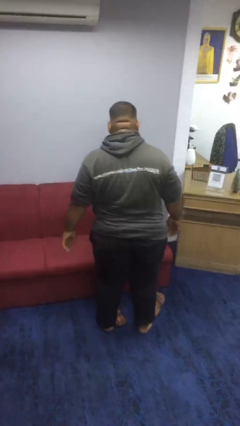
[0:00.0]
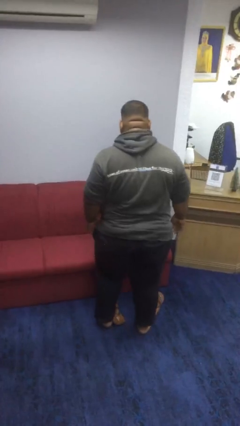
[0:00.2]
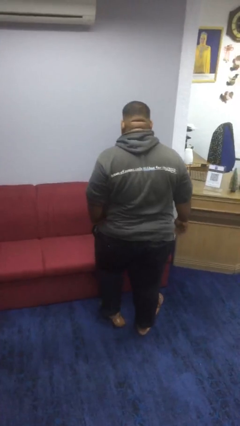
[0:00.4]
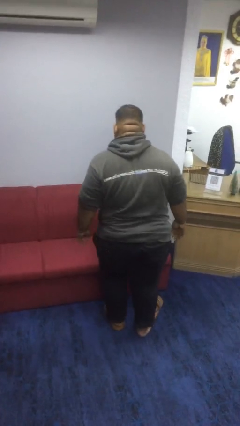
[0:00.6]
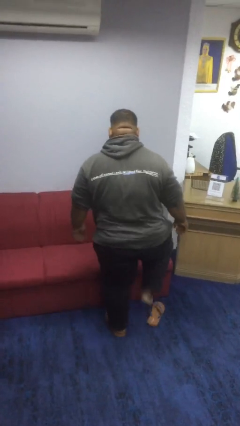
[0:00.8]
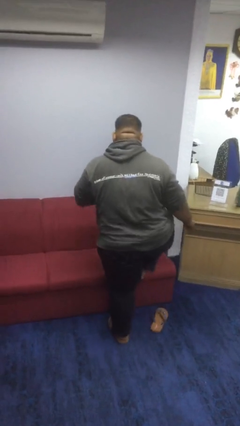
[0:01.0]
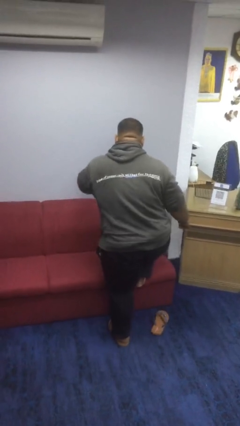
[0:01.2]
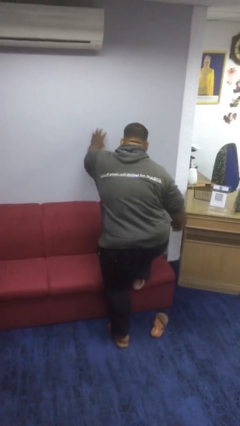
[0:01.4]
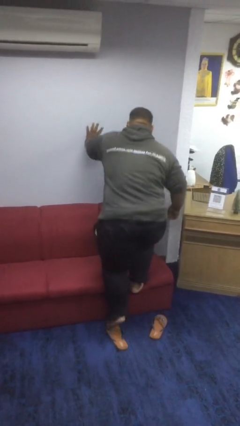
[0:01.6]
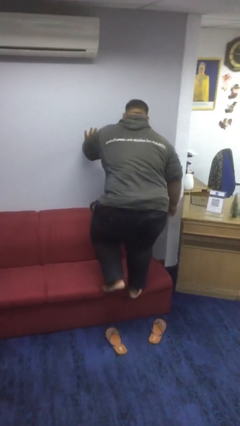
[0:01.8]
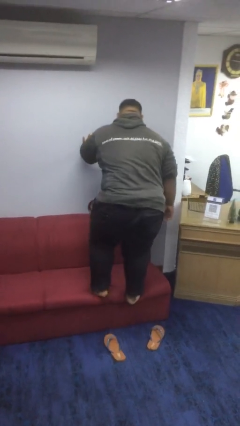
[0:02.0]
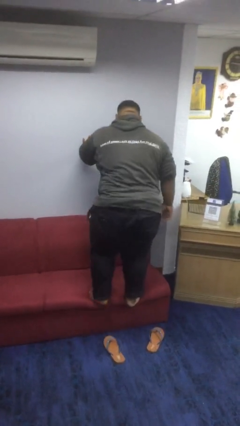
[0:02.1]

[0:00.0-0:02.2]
person climbs on couch

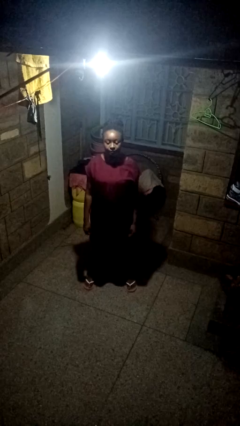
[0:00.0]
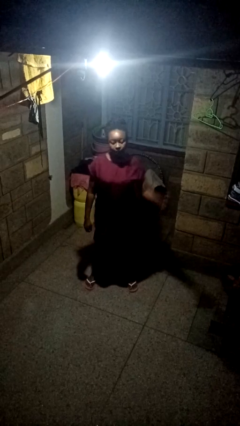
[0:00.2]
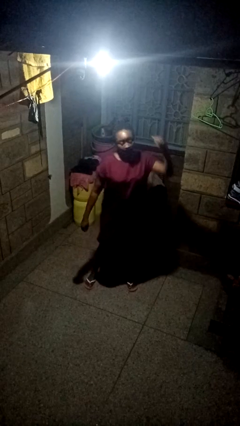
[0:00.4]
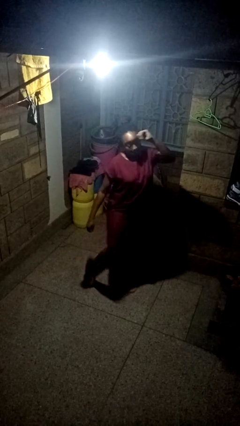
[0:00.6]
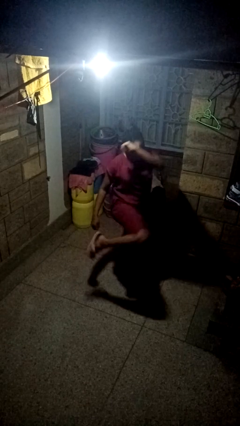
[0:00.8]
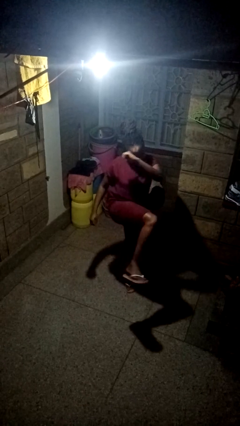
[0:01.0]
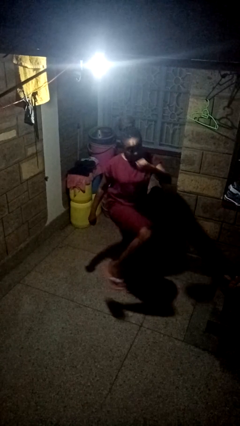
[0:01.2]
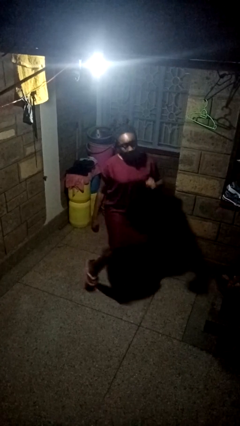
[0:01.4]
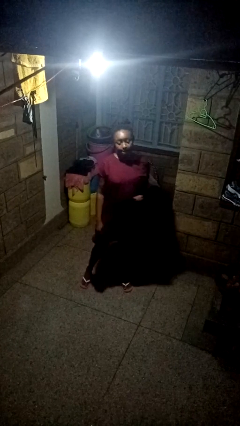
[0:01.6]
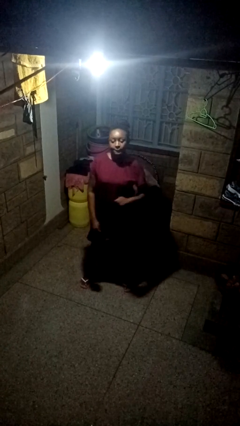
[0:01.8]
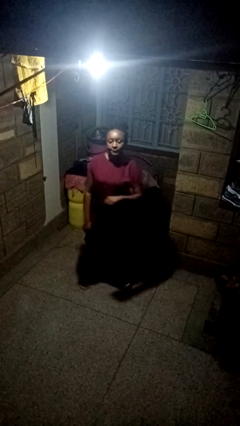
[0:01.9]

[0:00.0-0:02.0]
person karate kicks

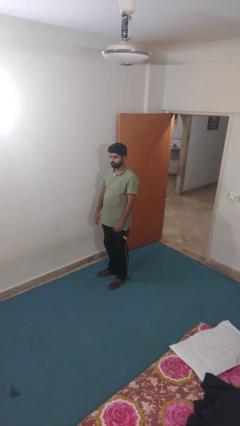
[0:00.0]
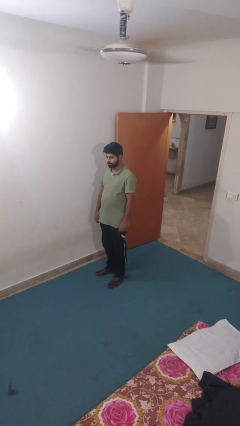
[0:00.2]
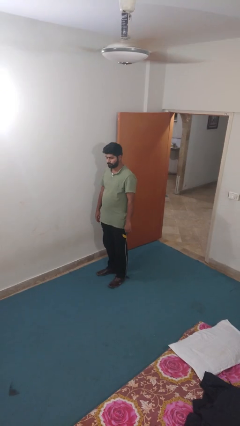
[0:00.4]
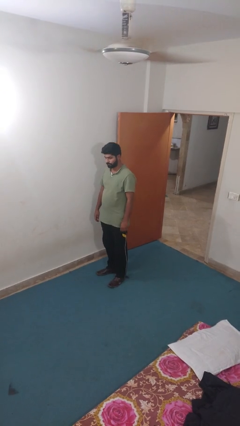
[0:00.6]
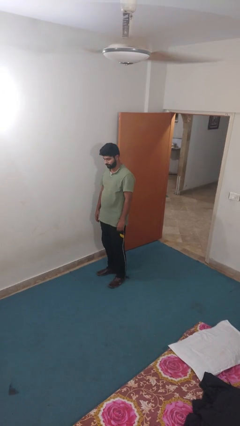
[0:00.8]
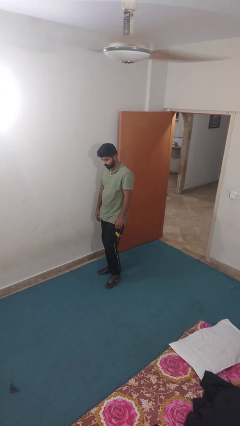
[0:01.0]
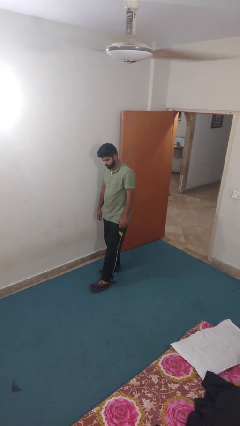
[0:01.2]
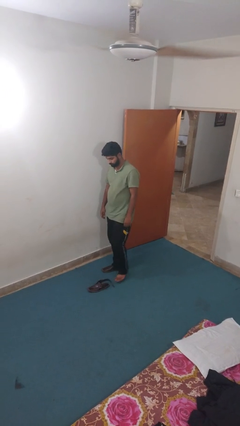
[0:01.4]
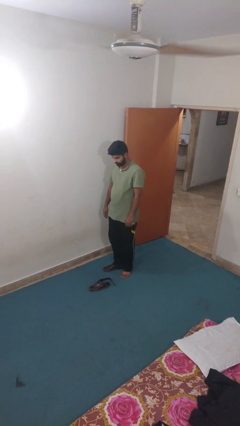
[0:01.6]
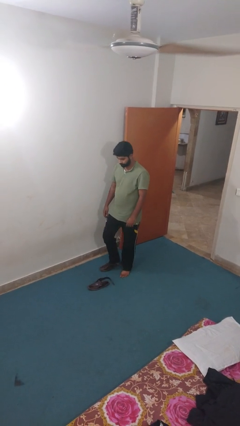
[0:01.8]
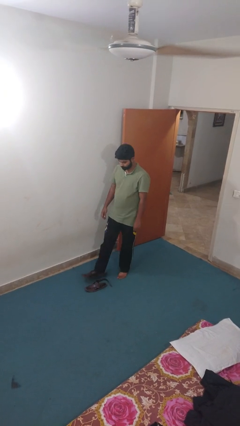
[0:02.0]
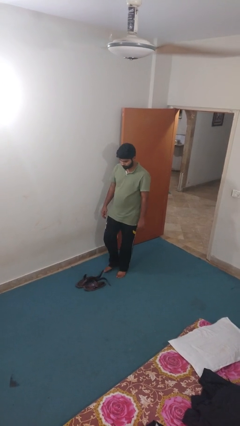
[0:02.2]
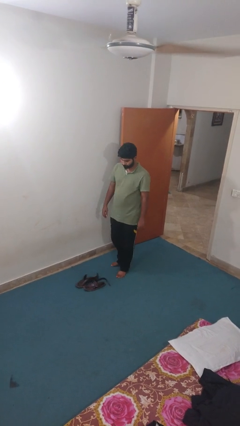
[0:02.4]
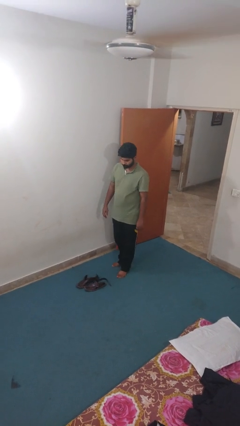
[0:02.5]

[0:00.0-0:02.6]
person takes off shoes

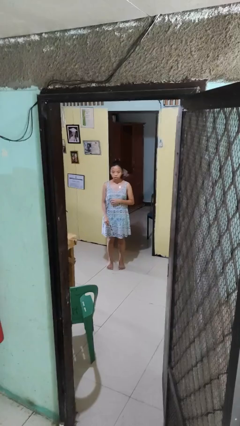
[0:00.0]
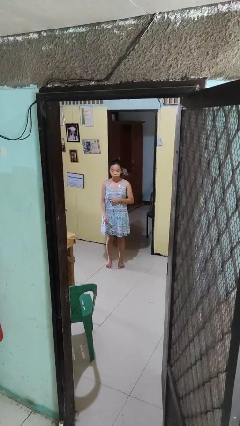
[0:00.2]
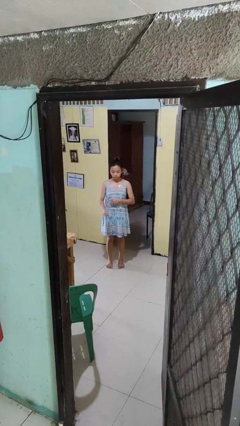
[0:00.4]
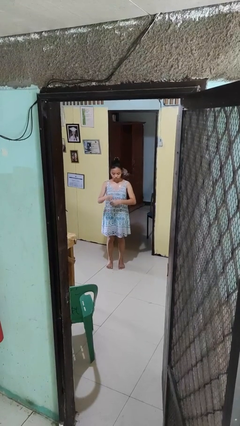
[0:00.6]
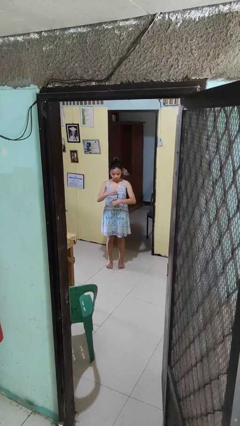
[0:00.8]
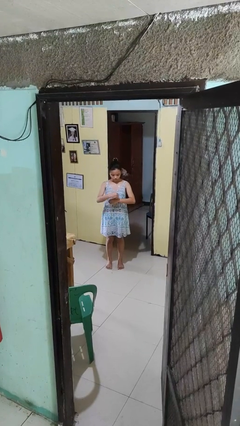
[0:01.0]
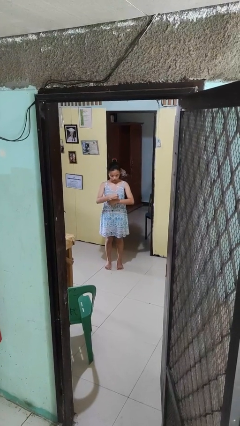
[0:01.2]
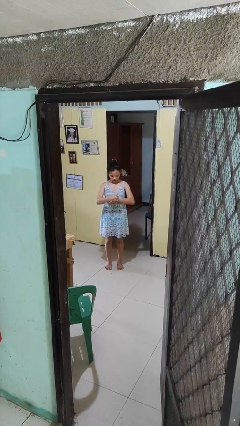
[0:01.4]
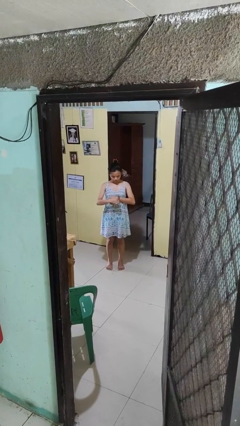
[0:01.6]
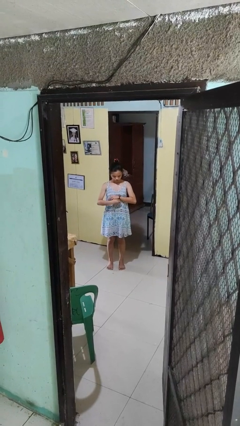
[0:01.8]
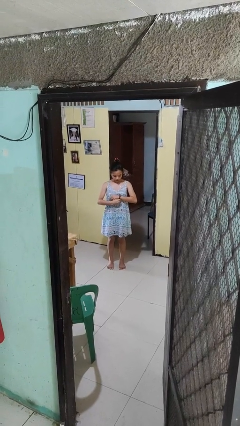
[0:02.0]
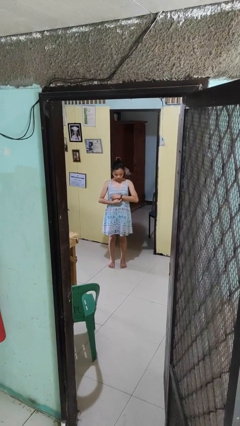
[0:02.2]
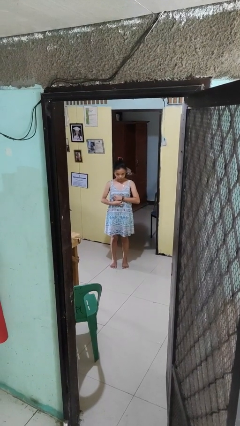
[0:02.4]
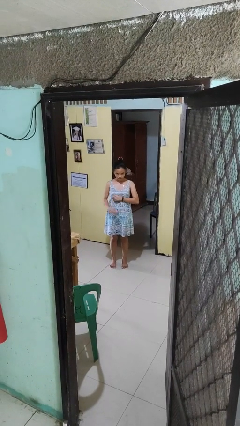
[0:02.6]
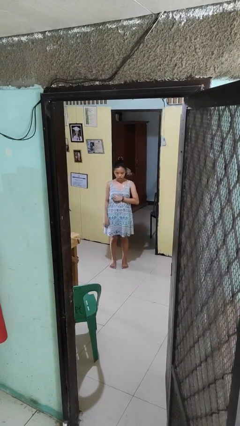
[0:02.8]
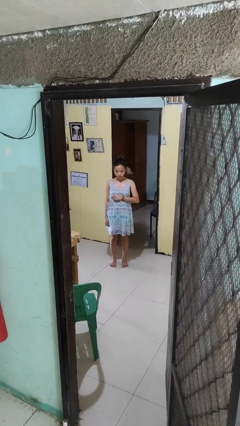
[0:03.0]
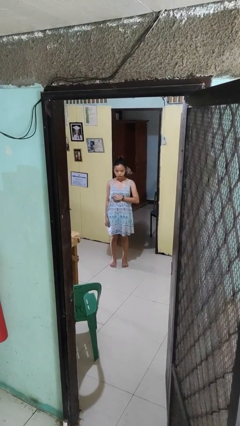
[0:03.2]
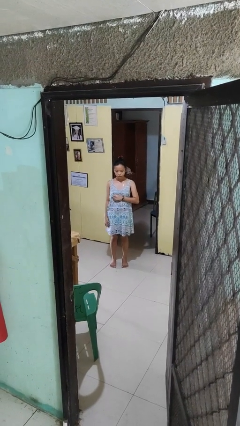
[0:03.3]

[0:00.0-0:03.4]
person puts on wristwatch

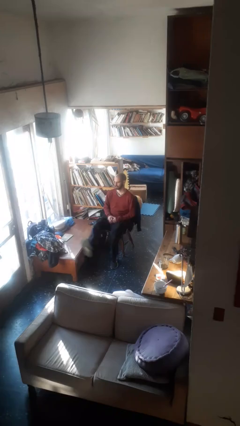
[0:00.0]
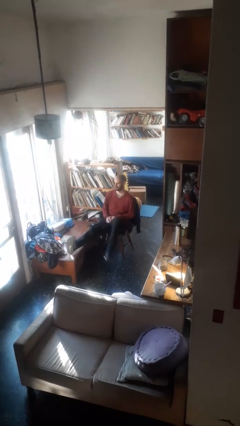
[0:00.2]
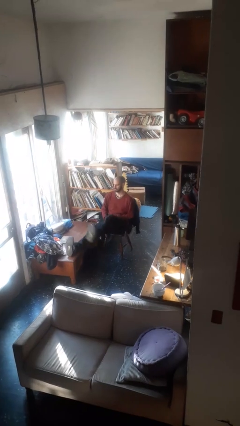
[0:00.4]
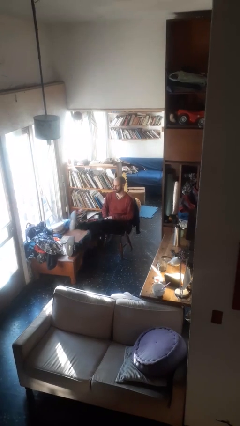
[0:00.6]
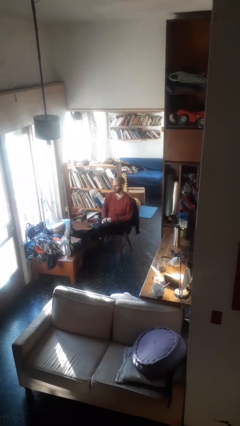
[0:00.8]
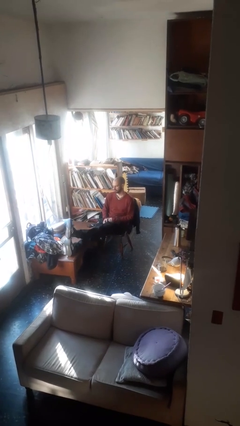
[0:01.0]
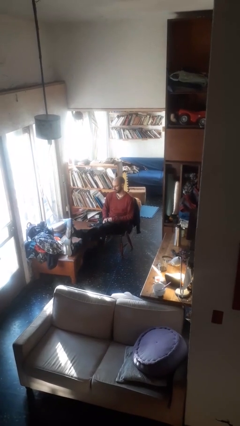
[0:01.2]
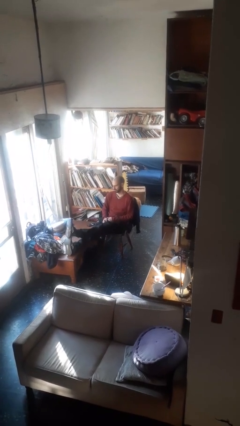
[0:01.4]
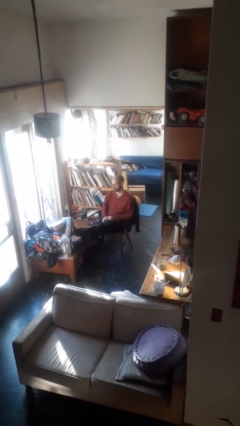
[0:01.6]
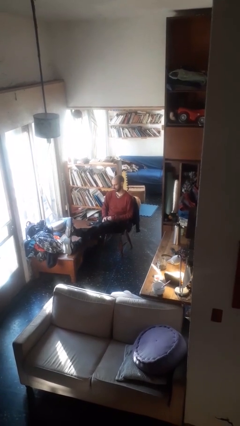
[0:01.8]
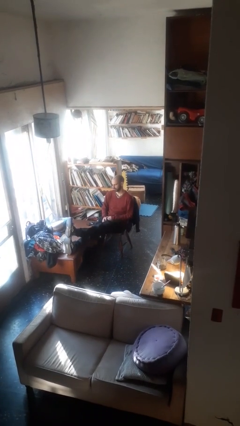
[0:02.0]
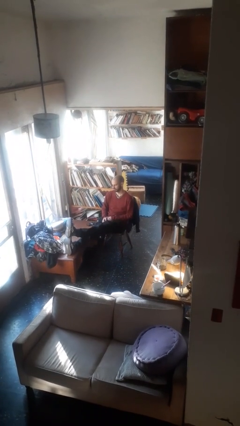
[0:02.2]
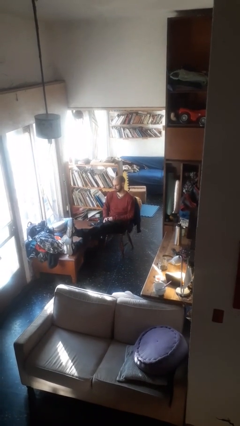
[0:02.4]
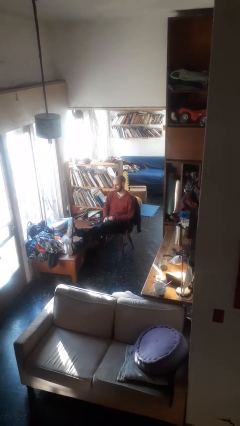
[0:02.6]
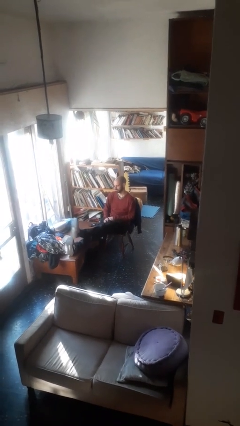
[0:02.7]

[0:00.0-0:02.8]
person puts feet up

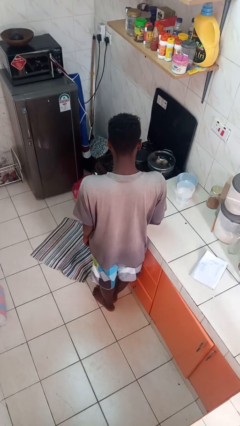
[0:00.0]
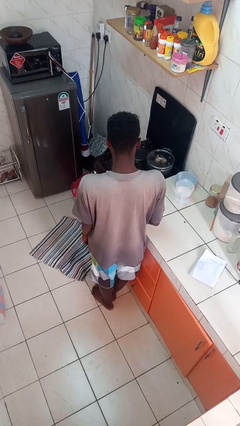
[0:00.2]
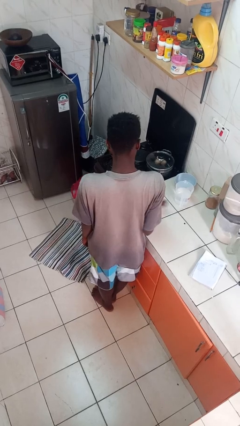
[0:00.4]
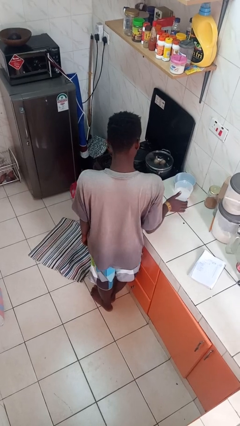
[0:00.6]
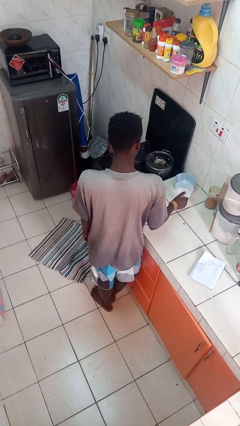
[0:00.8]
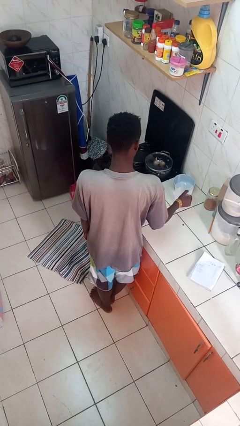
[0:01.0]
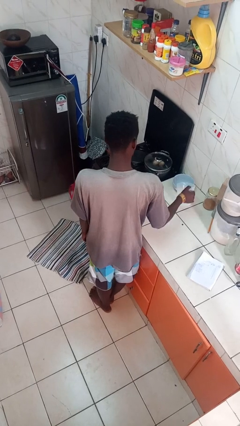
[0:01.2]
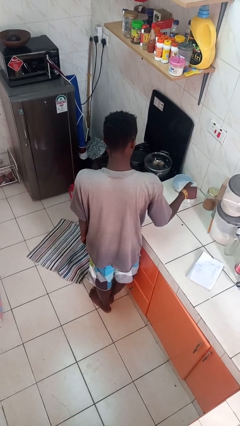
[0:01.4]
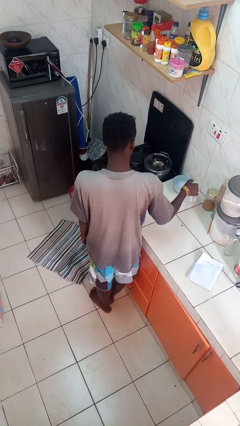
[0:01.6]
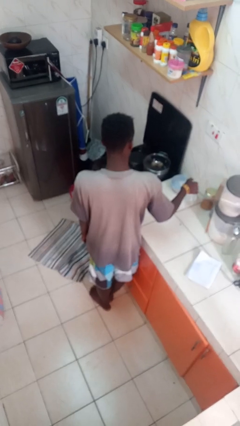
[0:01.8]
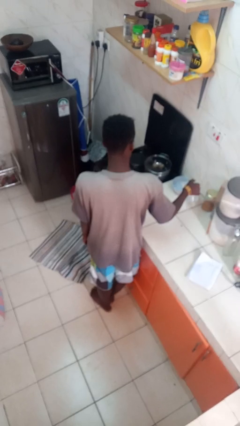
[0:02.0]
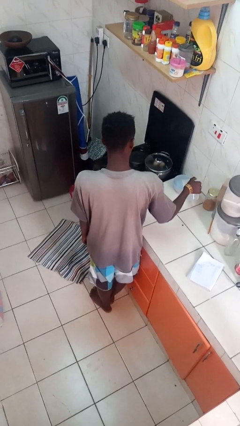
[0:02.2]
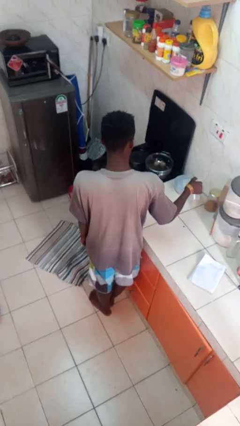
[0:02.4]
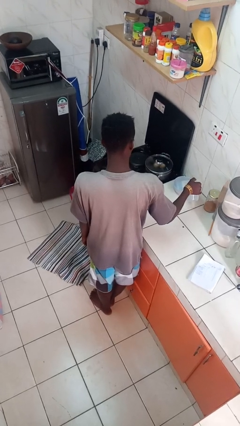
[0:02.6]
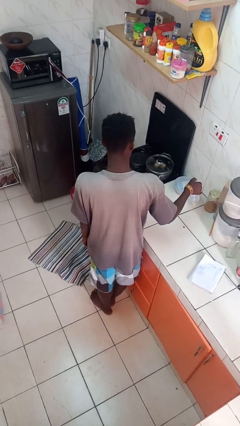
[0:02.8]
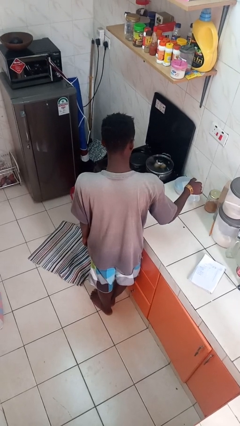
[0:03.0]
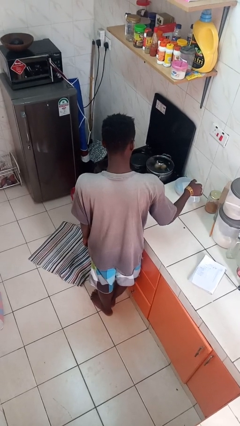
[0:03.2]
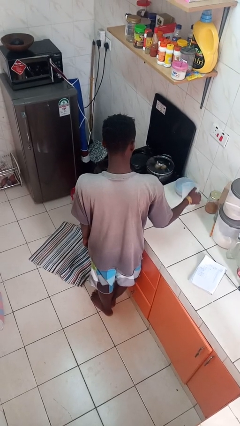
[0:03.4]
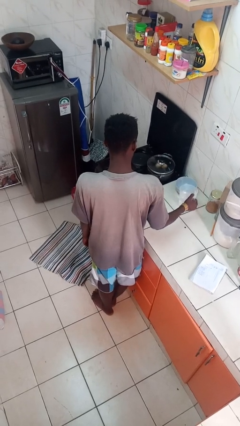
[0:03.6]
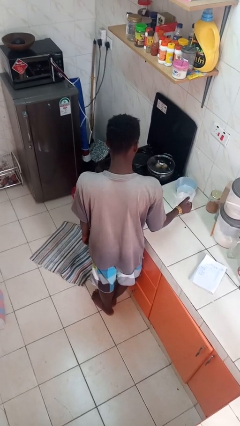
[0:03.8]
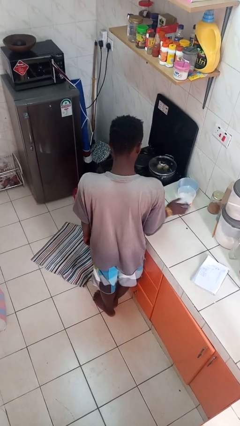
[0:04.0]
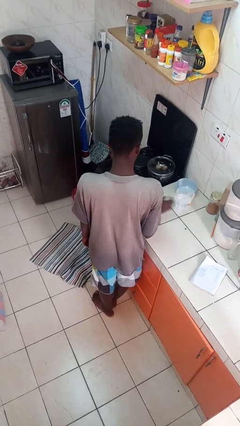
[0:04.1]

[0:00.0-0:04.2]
person pours into bowl

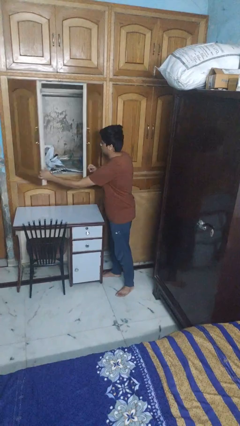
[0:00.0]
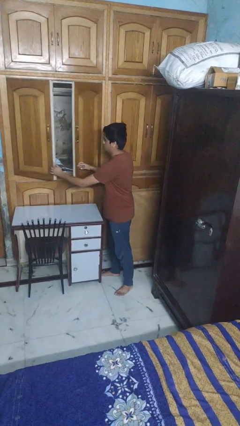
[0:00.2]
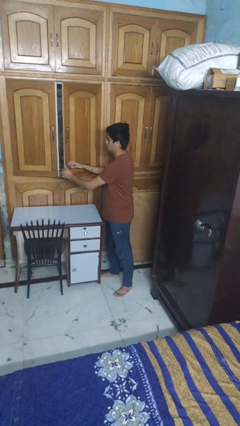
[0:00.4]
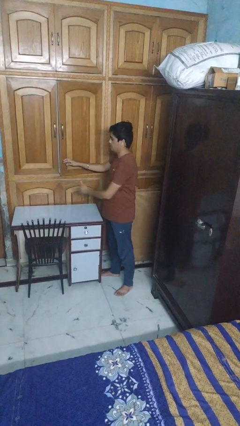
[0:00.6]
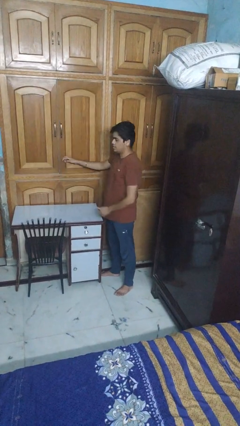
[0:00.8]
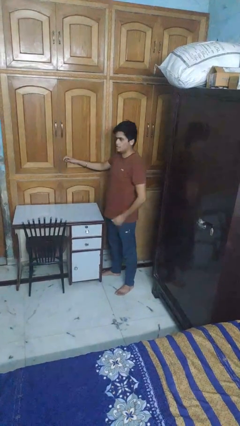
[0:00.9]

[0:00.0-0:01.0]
person closes closet door
